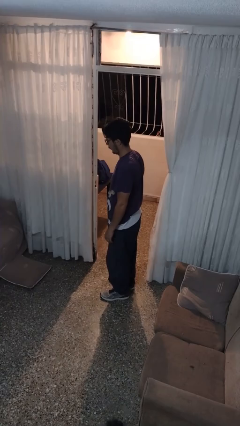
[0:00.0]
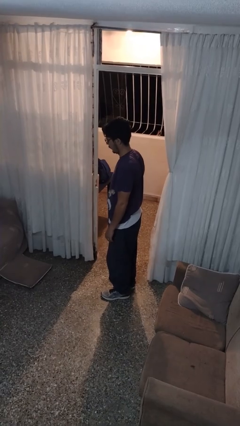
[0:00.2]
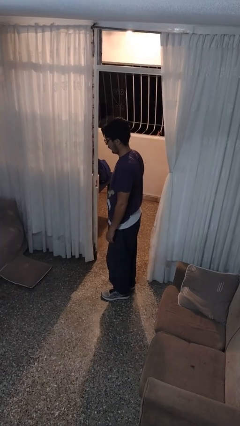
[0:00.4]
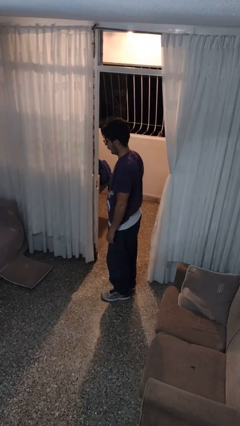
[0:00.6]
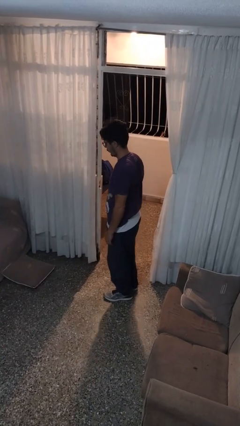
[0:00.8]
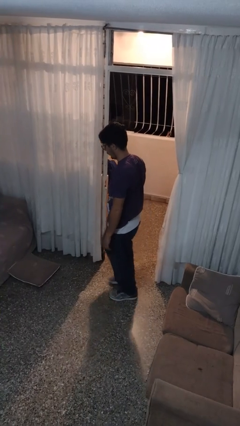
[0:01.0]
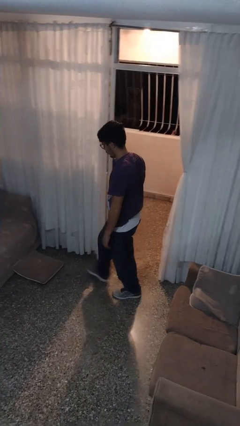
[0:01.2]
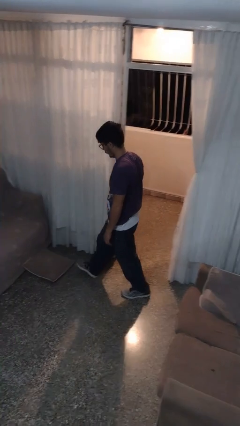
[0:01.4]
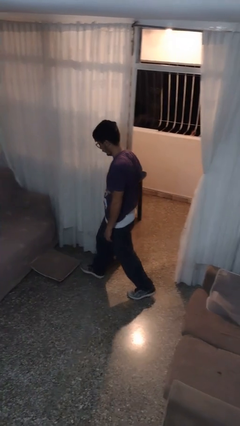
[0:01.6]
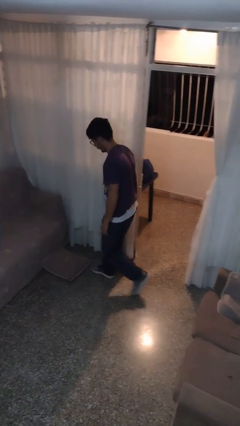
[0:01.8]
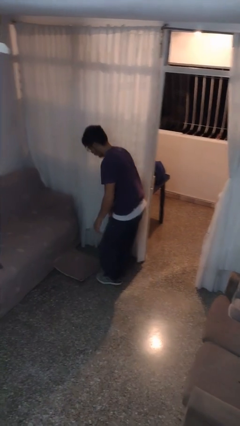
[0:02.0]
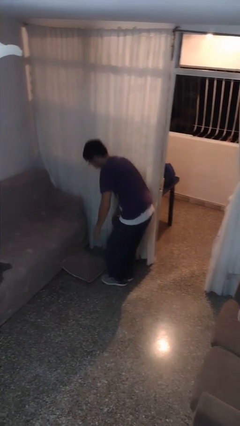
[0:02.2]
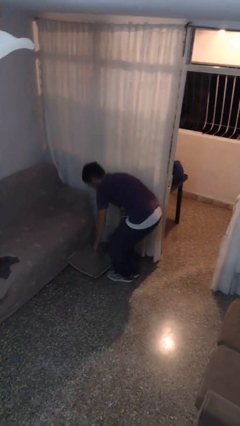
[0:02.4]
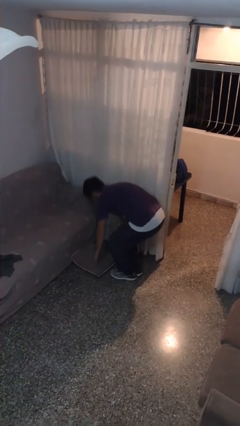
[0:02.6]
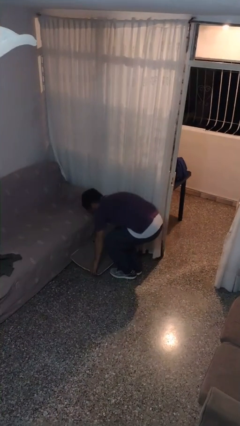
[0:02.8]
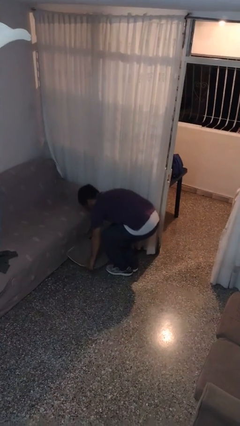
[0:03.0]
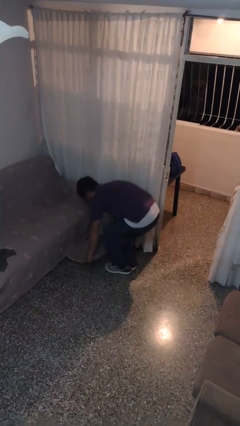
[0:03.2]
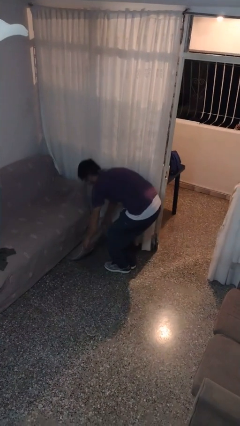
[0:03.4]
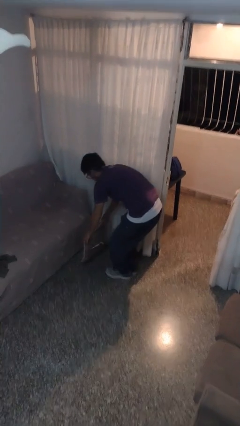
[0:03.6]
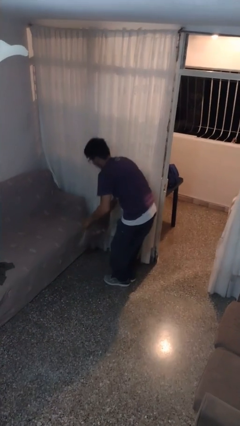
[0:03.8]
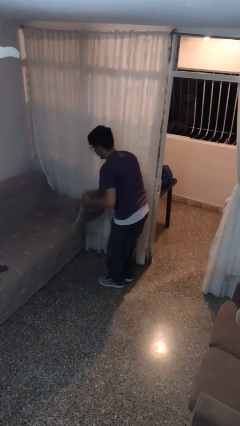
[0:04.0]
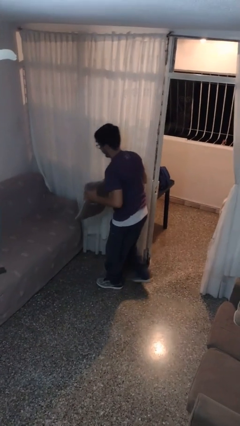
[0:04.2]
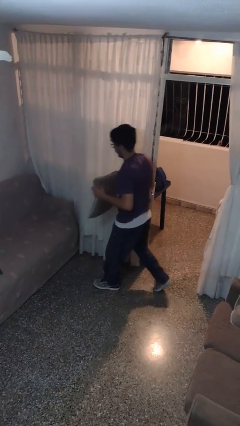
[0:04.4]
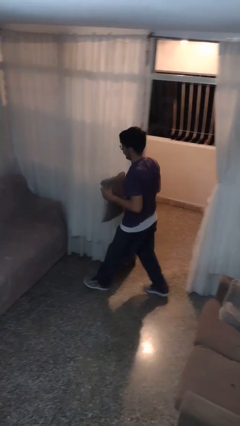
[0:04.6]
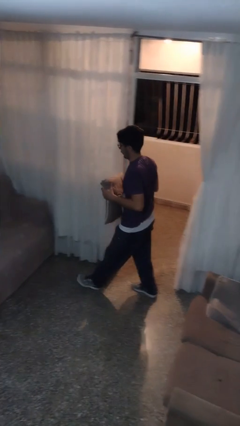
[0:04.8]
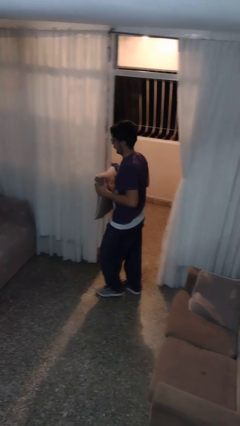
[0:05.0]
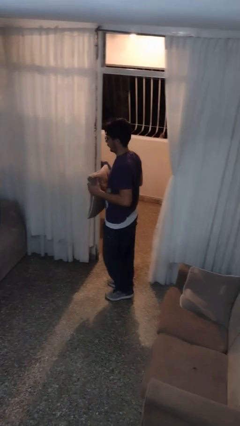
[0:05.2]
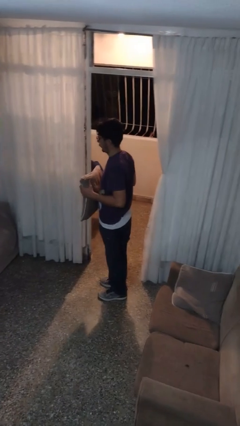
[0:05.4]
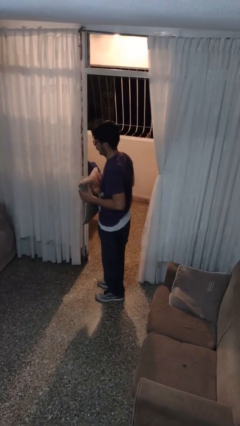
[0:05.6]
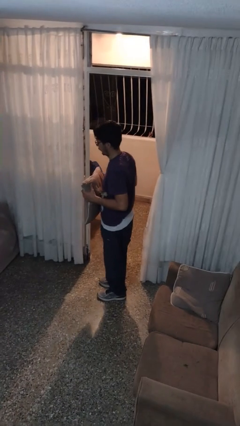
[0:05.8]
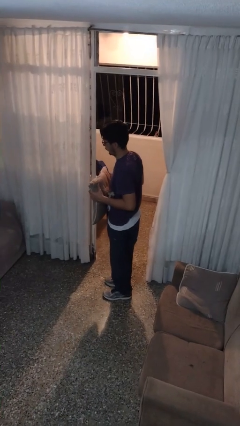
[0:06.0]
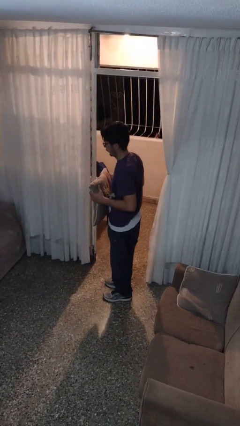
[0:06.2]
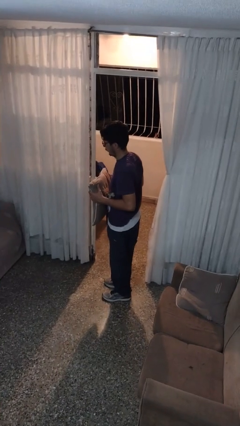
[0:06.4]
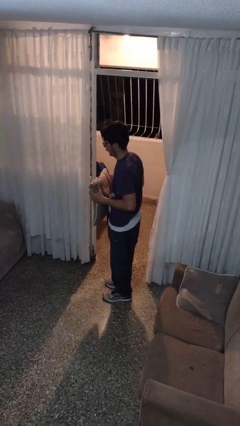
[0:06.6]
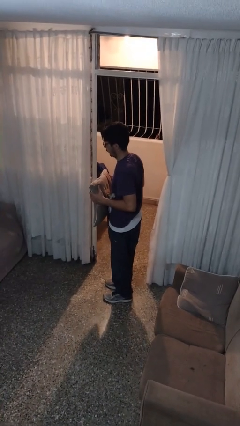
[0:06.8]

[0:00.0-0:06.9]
person picks up object from floor

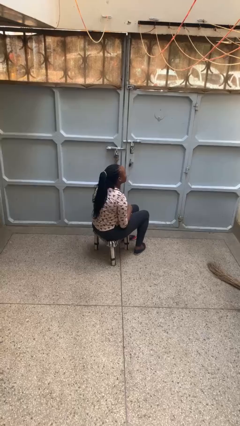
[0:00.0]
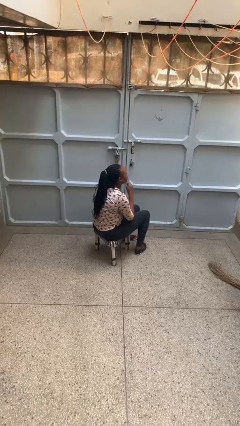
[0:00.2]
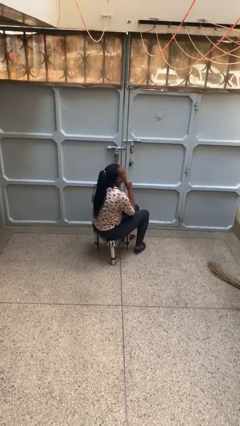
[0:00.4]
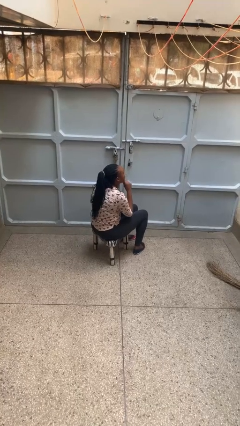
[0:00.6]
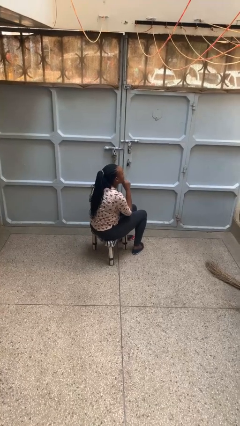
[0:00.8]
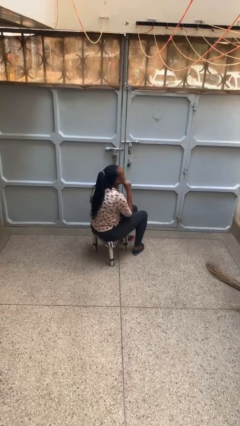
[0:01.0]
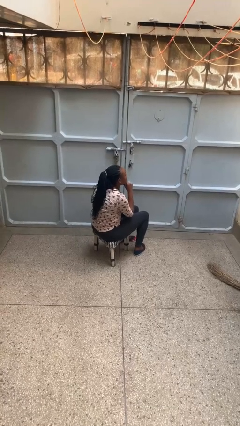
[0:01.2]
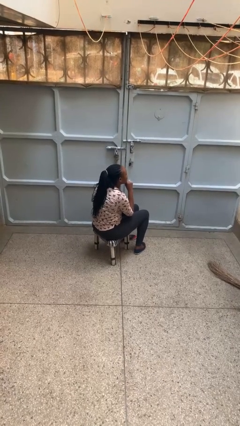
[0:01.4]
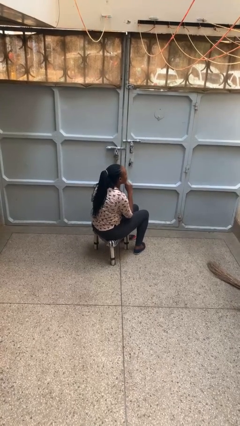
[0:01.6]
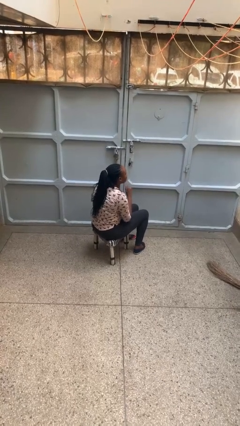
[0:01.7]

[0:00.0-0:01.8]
person strokes chin

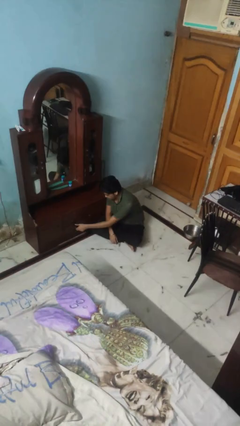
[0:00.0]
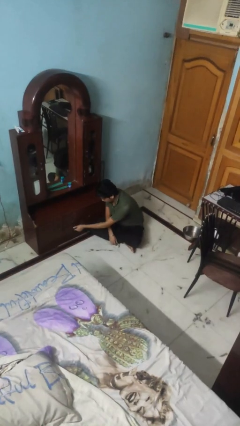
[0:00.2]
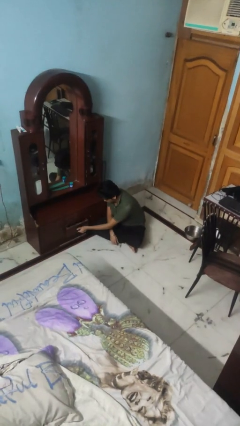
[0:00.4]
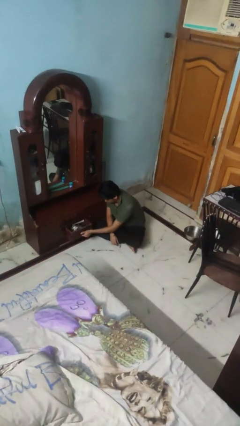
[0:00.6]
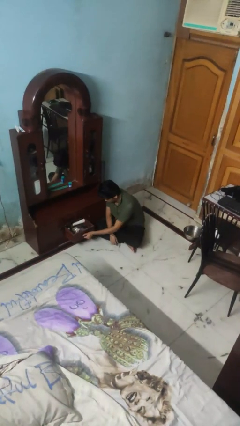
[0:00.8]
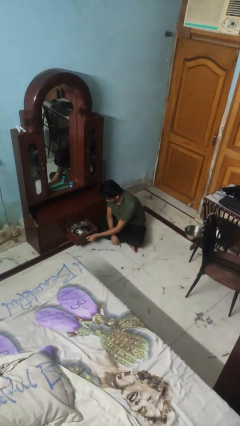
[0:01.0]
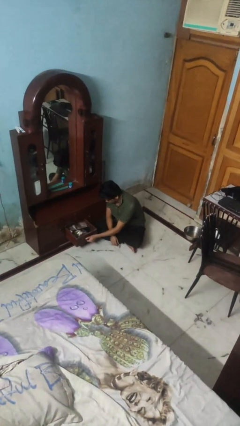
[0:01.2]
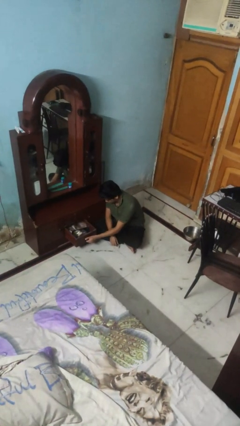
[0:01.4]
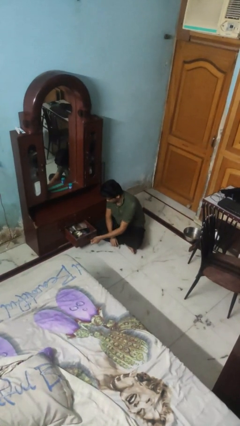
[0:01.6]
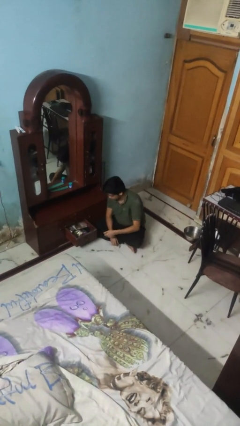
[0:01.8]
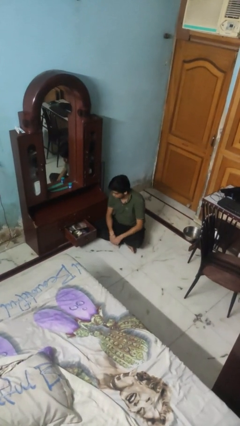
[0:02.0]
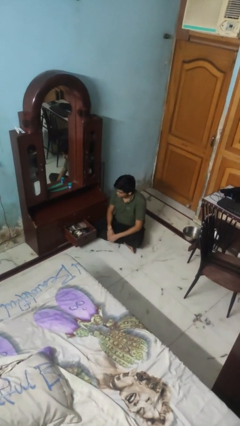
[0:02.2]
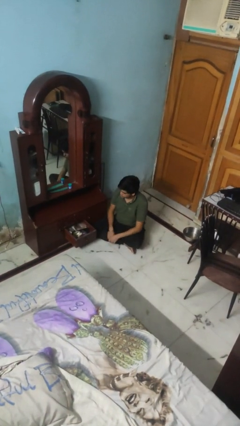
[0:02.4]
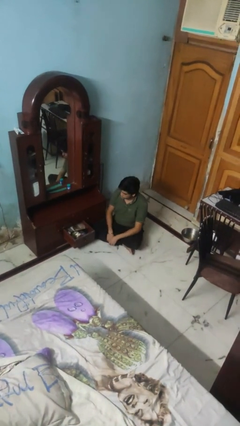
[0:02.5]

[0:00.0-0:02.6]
person opens dresser drawer

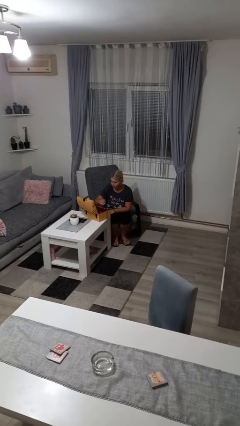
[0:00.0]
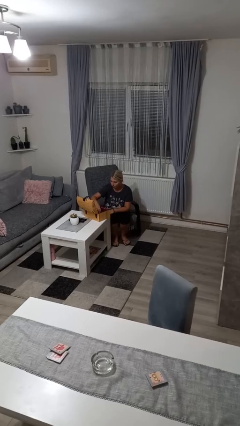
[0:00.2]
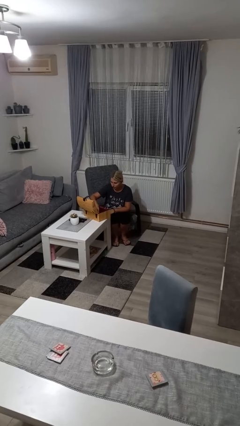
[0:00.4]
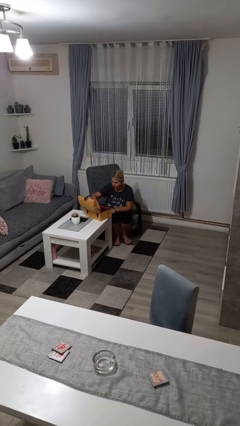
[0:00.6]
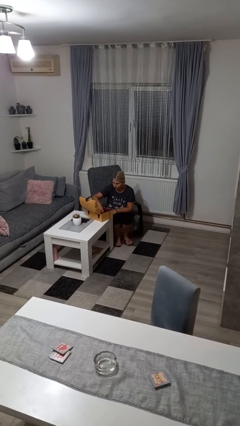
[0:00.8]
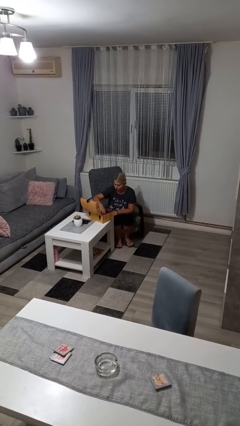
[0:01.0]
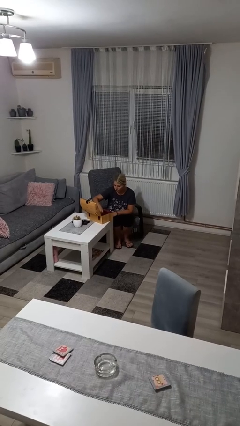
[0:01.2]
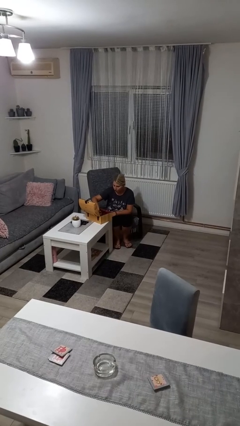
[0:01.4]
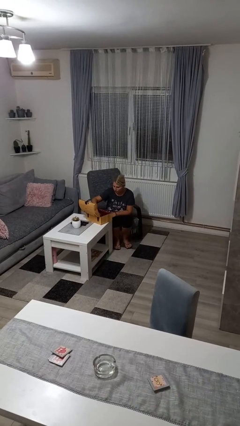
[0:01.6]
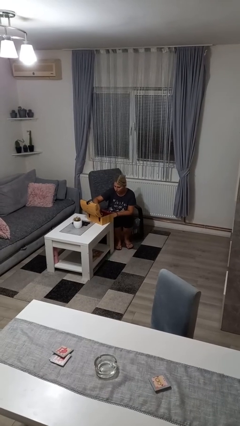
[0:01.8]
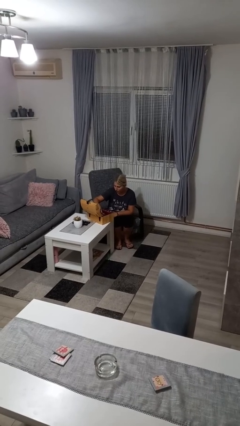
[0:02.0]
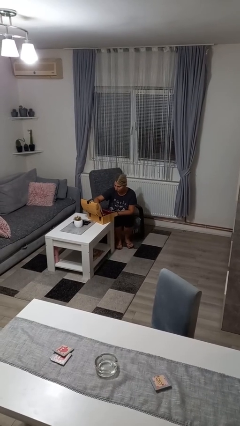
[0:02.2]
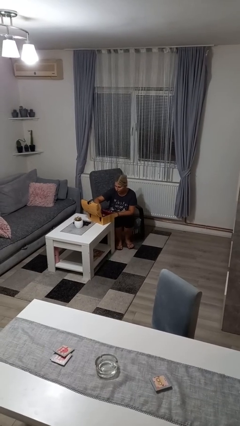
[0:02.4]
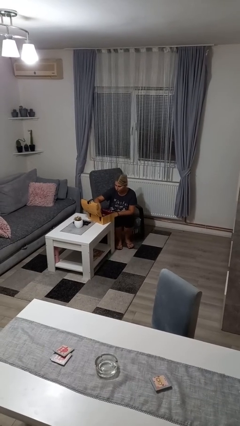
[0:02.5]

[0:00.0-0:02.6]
person searches jewelry box

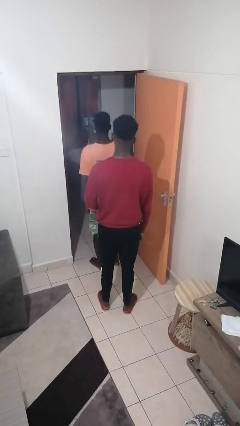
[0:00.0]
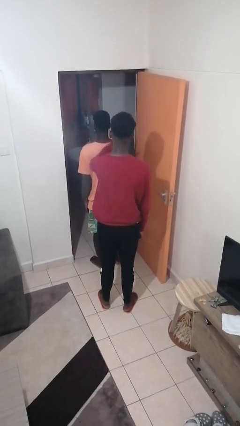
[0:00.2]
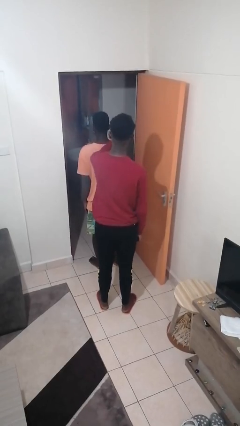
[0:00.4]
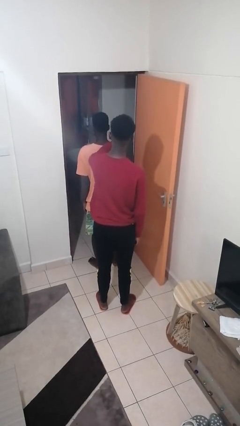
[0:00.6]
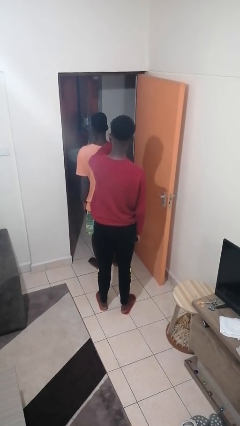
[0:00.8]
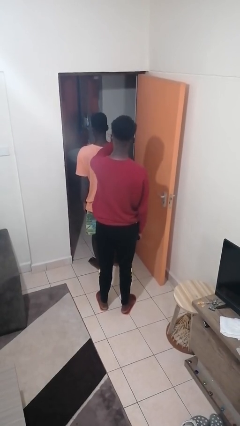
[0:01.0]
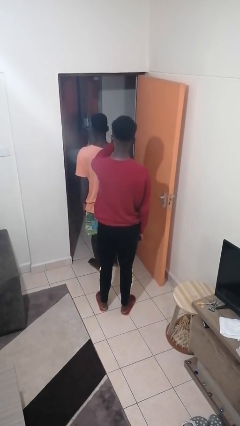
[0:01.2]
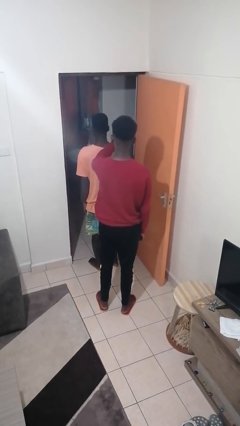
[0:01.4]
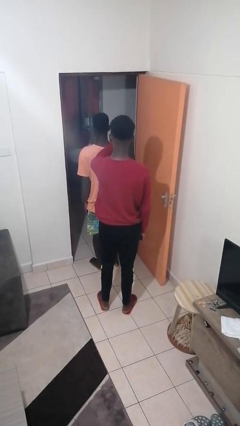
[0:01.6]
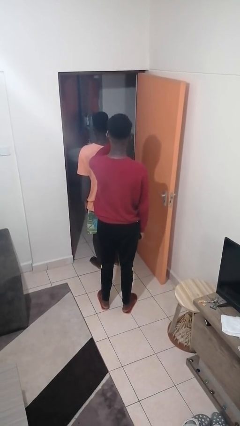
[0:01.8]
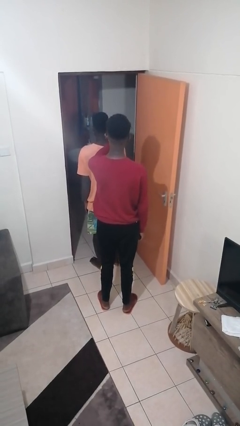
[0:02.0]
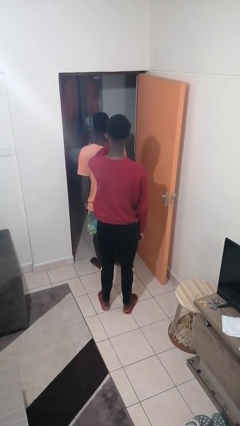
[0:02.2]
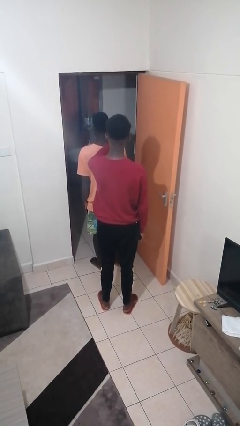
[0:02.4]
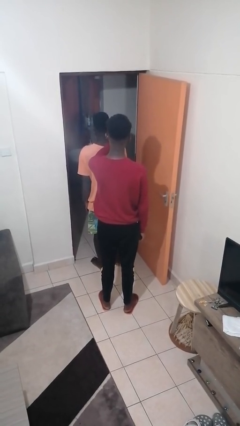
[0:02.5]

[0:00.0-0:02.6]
person grabs person by shoulder

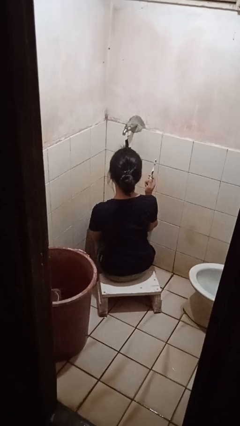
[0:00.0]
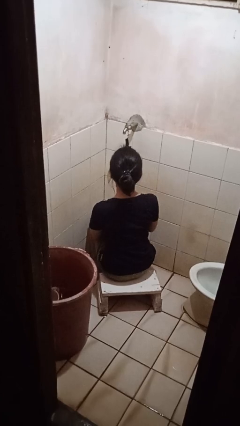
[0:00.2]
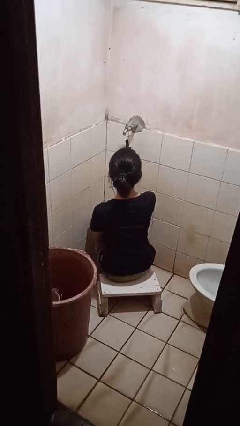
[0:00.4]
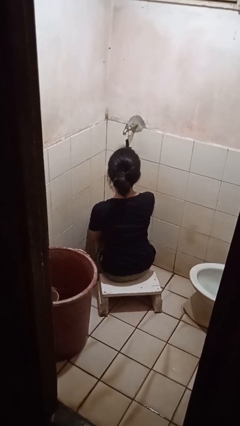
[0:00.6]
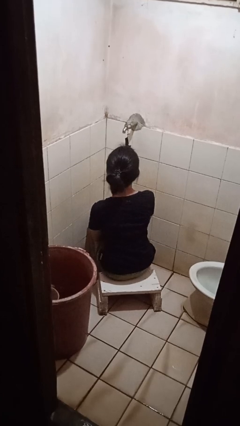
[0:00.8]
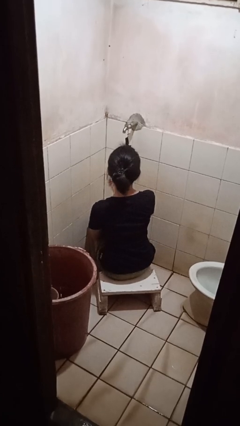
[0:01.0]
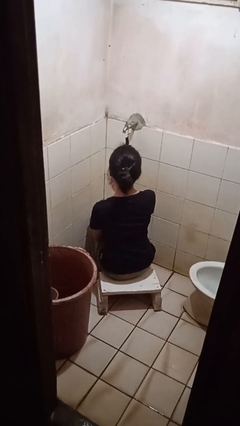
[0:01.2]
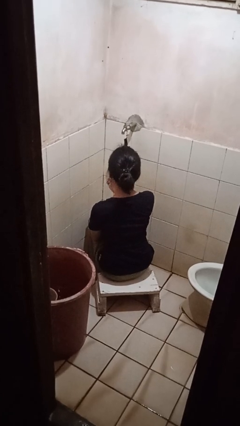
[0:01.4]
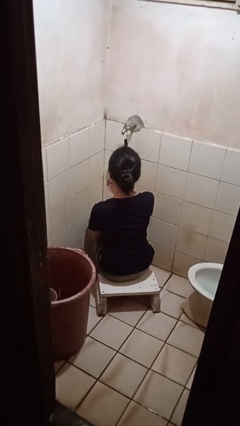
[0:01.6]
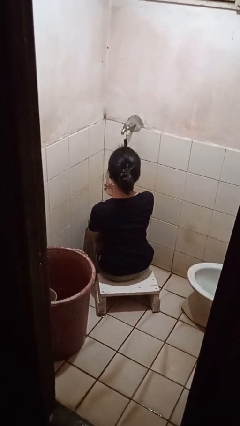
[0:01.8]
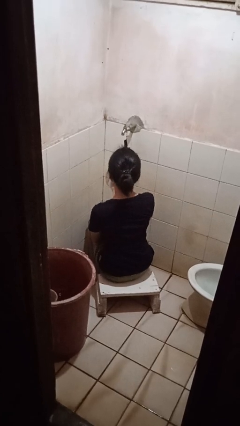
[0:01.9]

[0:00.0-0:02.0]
person brushes teeth
